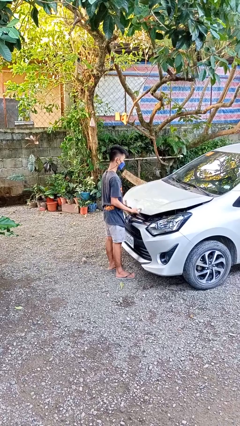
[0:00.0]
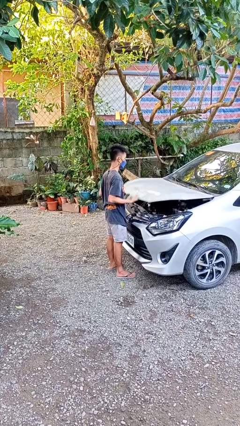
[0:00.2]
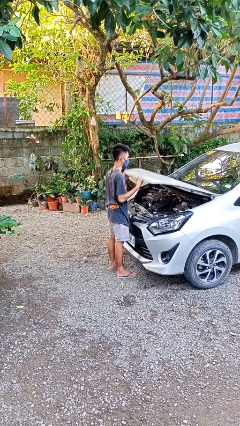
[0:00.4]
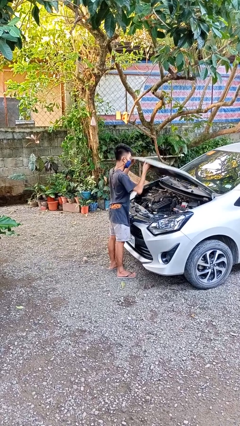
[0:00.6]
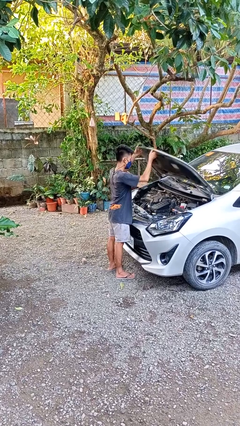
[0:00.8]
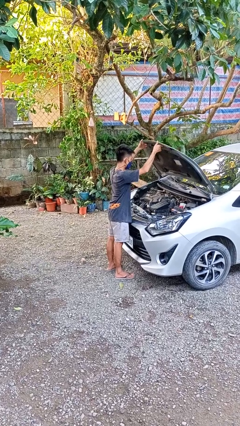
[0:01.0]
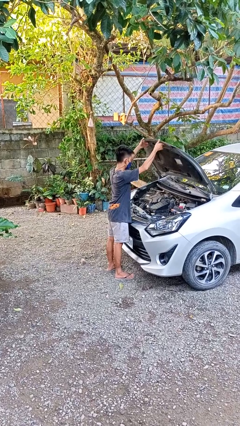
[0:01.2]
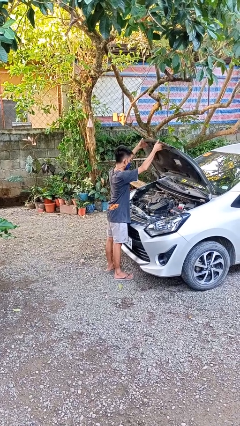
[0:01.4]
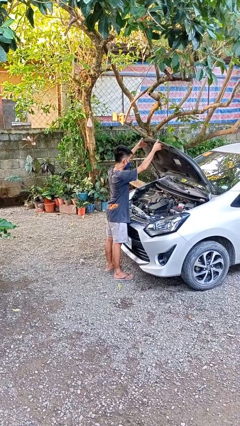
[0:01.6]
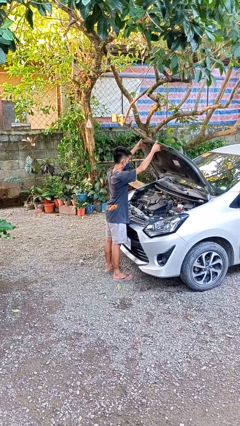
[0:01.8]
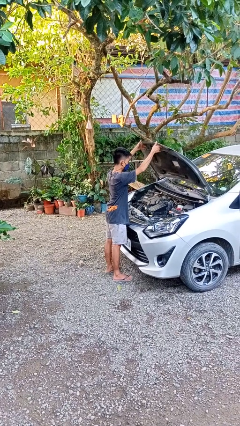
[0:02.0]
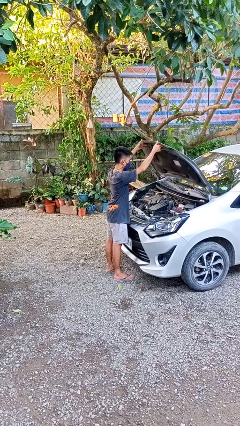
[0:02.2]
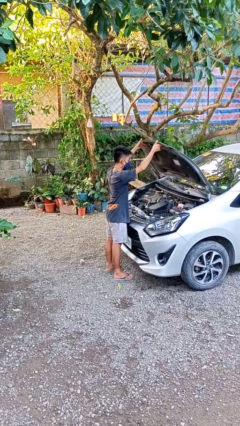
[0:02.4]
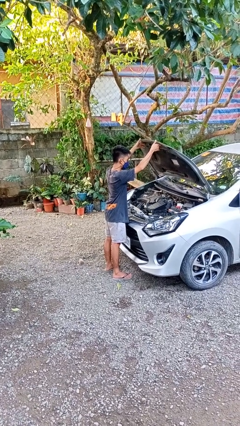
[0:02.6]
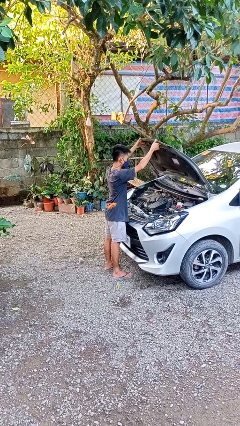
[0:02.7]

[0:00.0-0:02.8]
person opens car hood

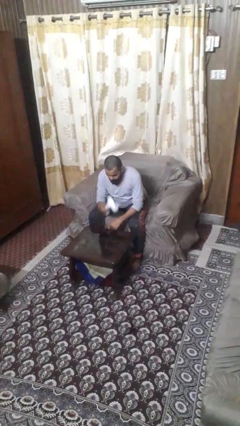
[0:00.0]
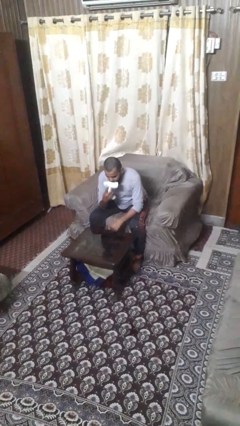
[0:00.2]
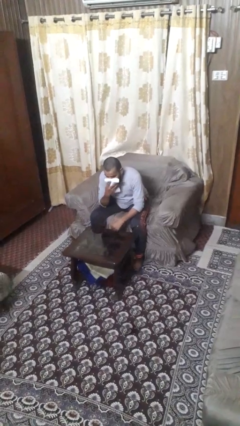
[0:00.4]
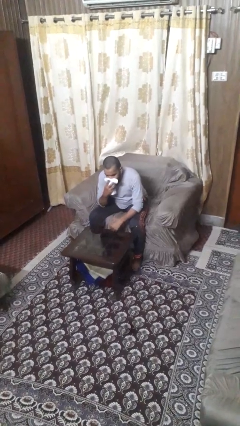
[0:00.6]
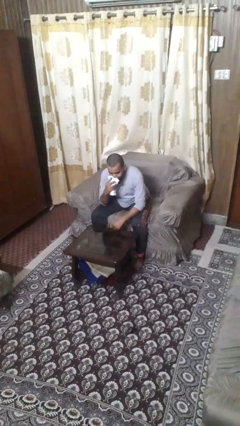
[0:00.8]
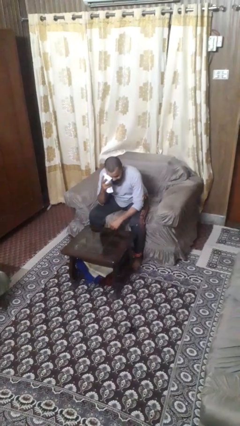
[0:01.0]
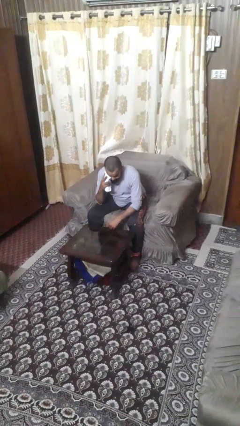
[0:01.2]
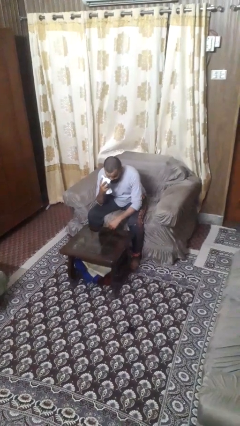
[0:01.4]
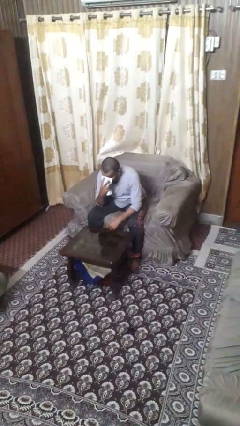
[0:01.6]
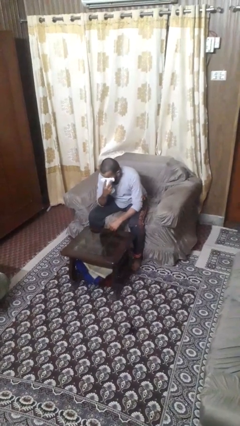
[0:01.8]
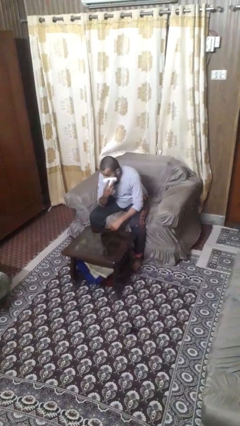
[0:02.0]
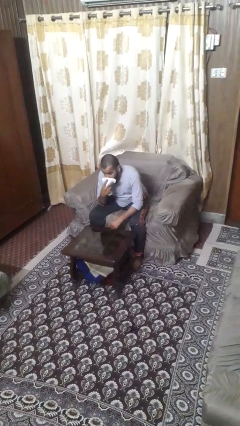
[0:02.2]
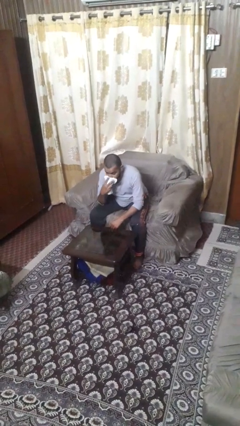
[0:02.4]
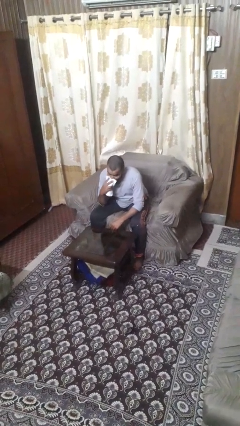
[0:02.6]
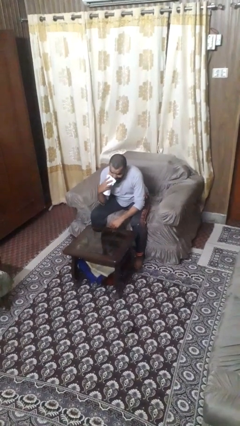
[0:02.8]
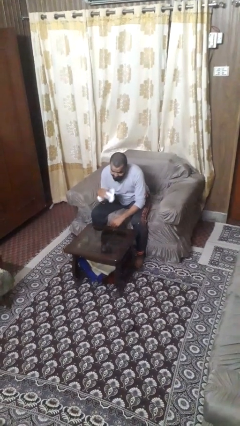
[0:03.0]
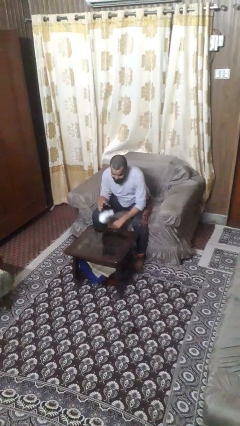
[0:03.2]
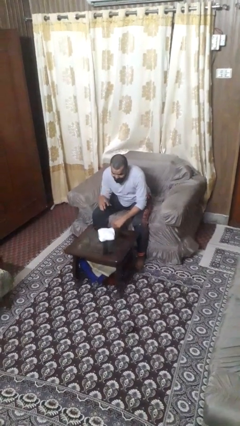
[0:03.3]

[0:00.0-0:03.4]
person wipes mouth with napkin

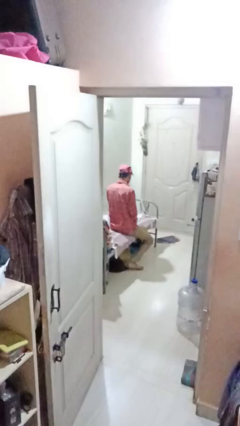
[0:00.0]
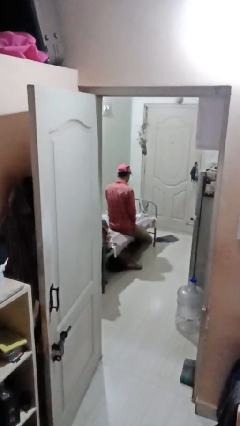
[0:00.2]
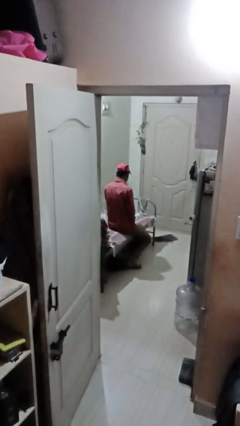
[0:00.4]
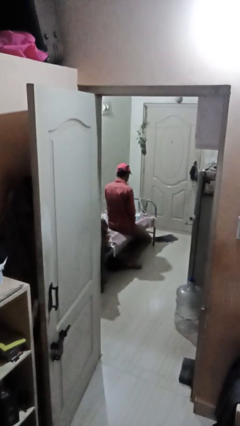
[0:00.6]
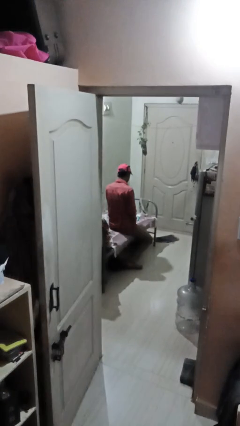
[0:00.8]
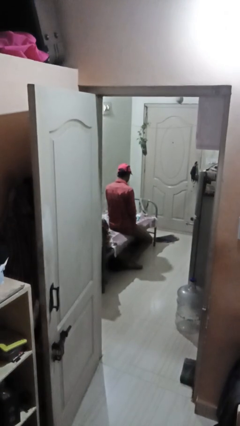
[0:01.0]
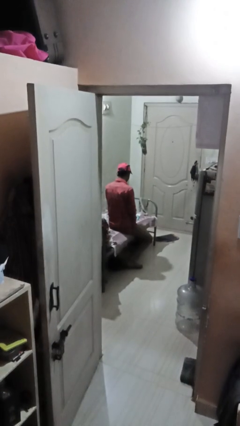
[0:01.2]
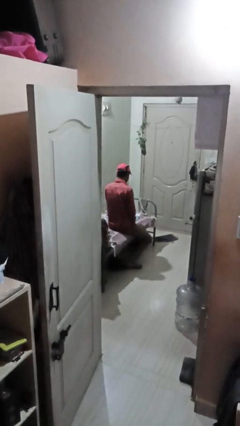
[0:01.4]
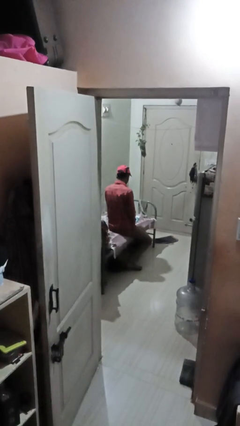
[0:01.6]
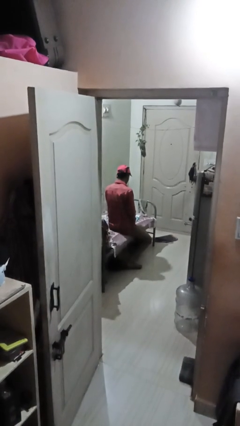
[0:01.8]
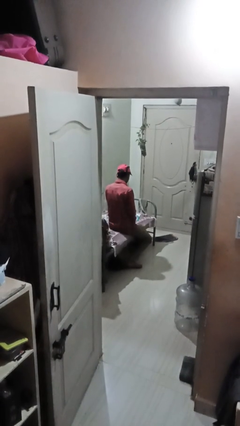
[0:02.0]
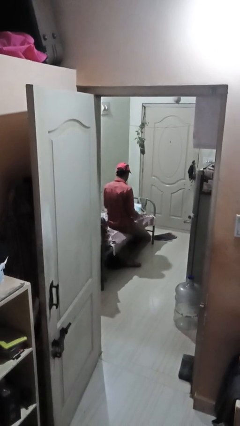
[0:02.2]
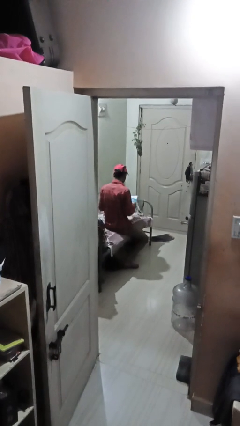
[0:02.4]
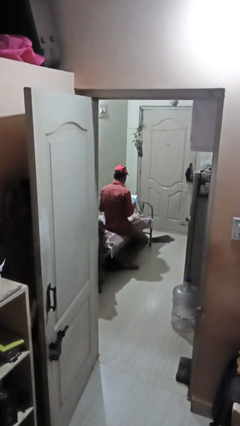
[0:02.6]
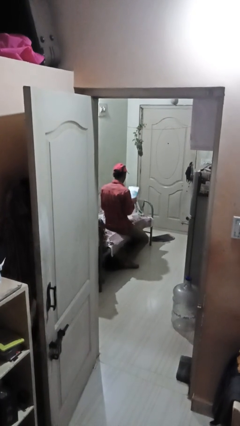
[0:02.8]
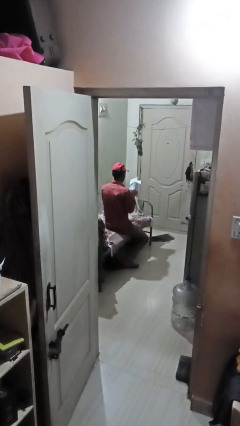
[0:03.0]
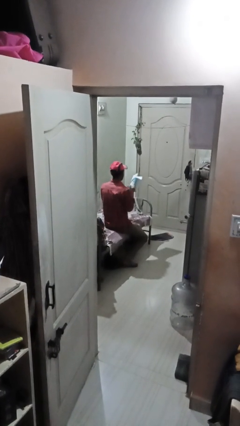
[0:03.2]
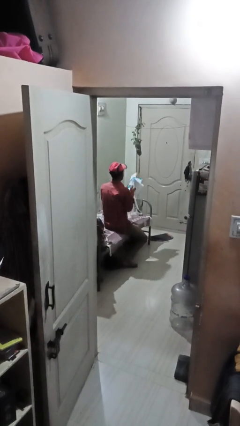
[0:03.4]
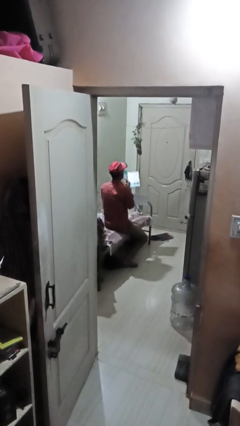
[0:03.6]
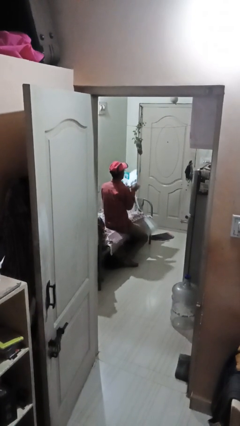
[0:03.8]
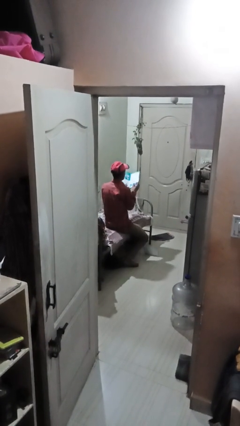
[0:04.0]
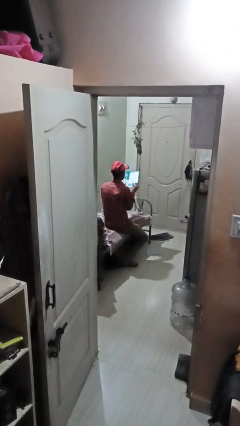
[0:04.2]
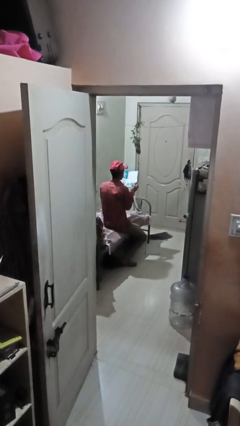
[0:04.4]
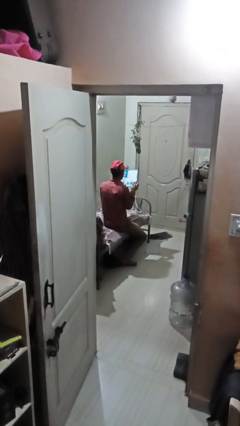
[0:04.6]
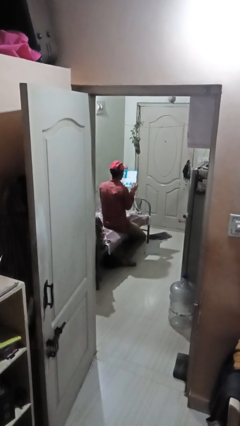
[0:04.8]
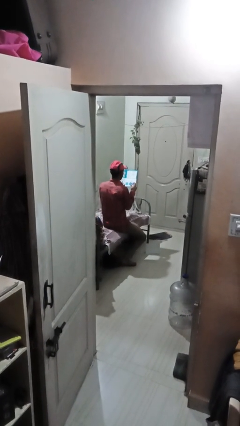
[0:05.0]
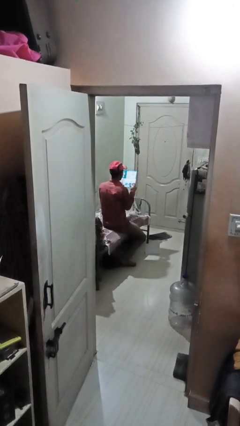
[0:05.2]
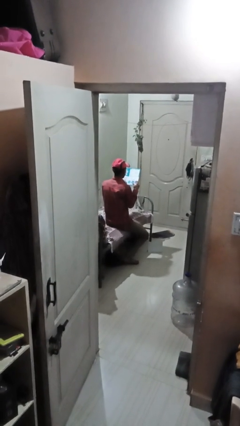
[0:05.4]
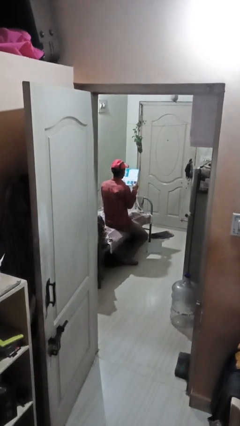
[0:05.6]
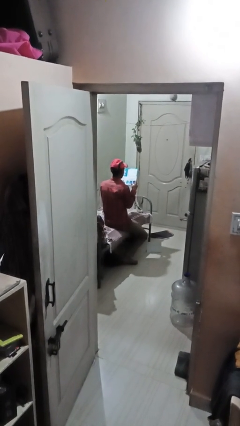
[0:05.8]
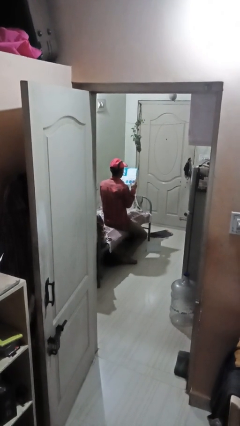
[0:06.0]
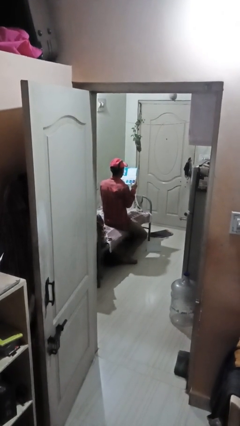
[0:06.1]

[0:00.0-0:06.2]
person reads magazine

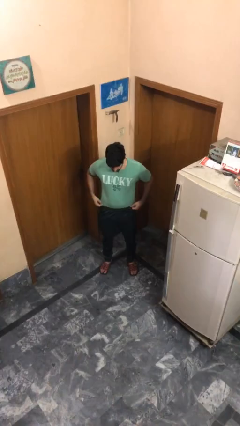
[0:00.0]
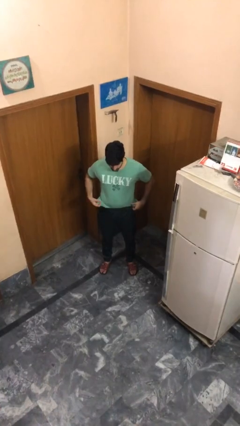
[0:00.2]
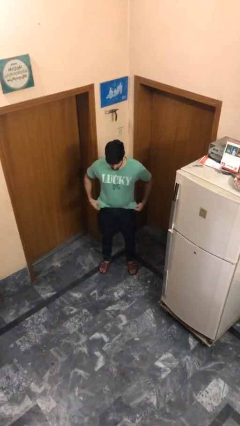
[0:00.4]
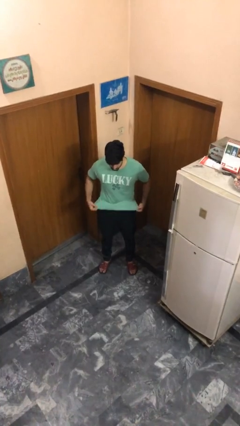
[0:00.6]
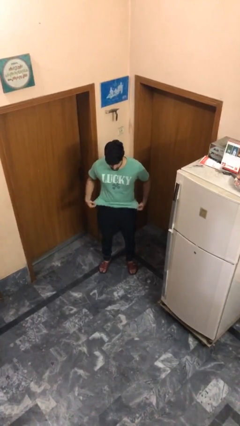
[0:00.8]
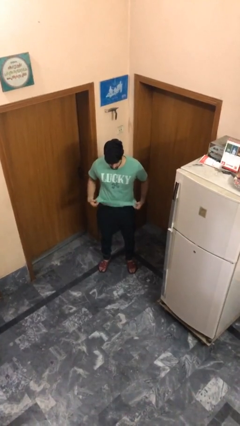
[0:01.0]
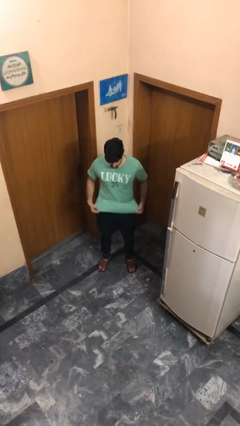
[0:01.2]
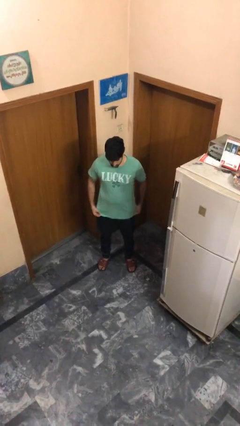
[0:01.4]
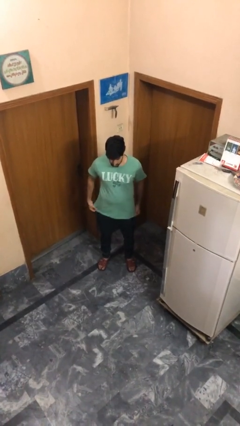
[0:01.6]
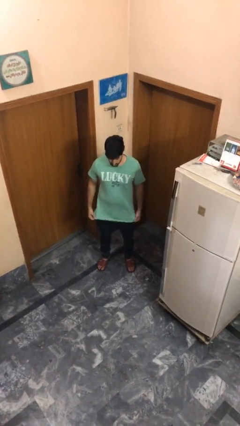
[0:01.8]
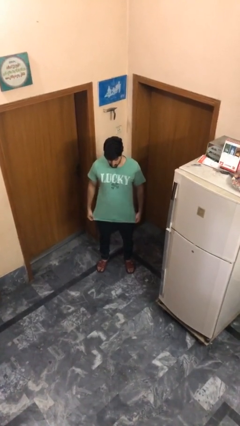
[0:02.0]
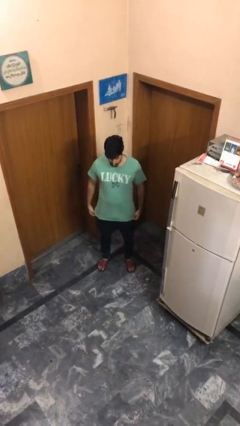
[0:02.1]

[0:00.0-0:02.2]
person untucks shirt

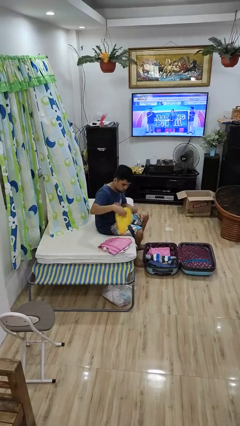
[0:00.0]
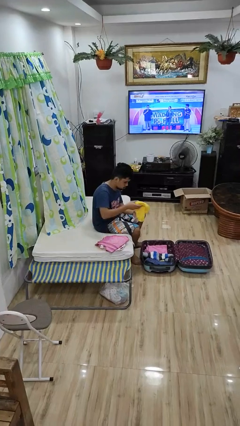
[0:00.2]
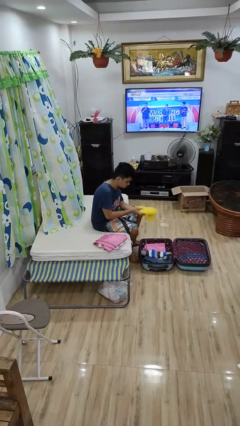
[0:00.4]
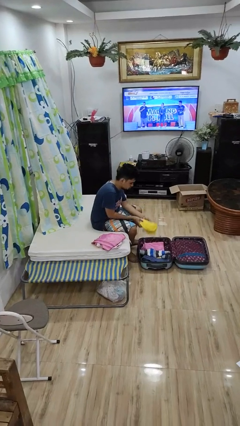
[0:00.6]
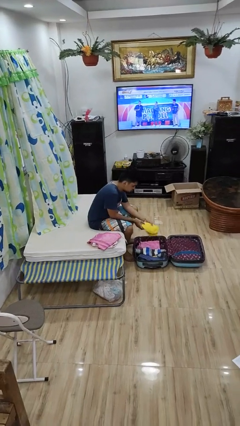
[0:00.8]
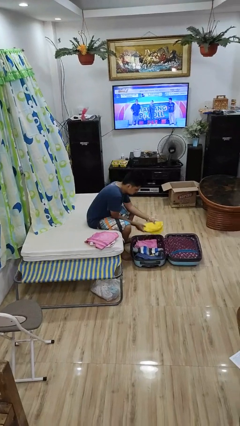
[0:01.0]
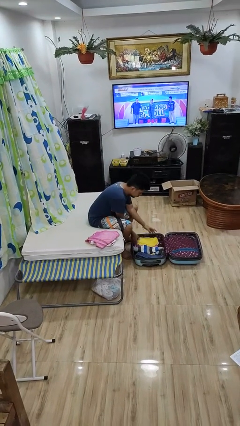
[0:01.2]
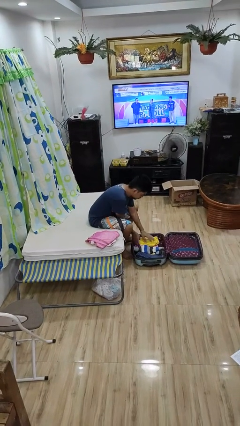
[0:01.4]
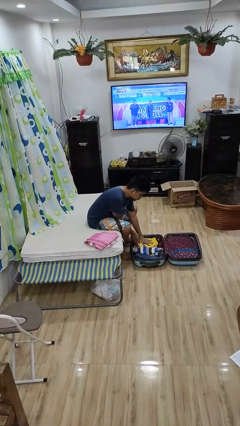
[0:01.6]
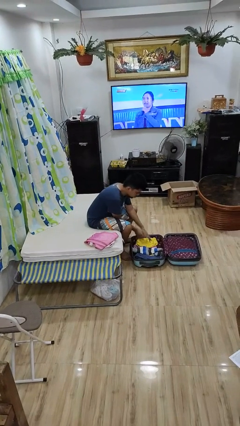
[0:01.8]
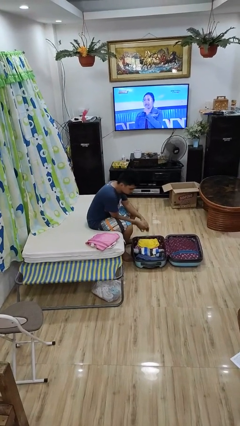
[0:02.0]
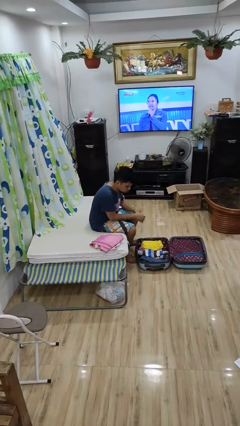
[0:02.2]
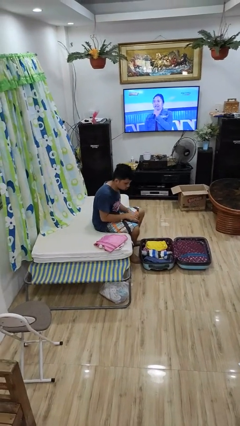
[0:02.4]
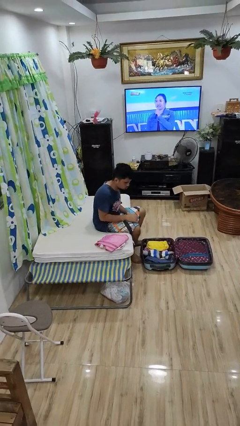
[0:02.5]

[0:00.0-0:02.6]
person loads clothes into suitcase

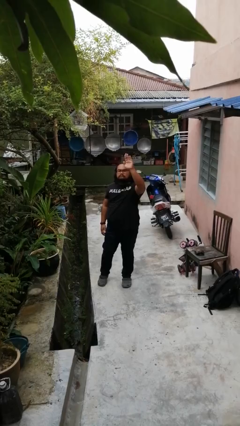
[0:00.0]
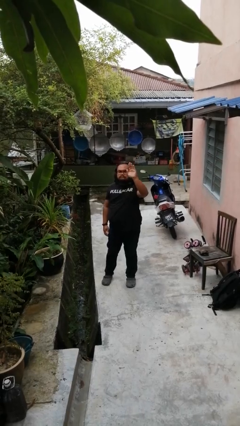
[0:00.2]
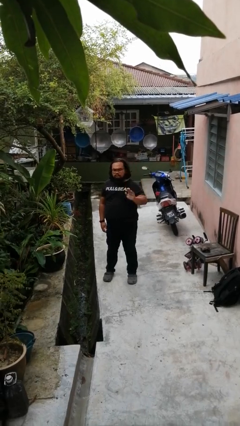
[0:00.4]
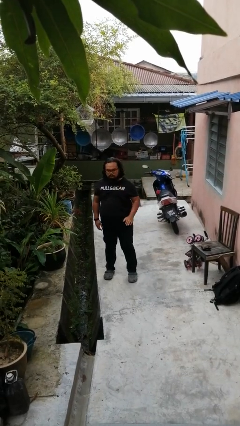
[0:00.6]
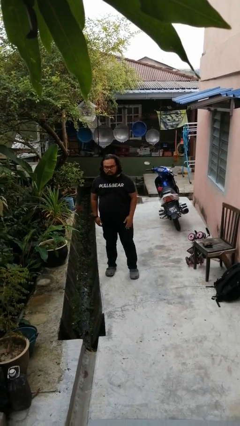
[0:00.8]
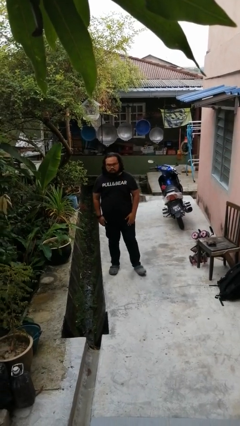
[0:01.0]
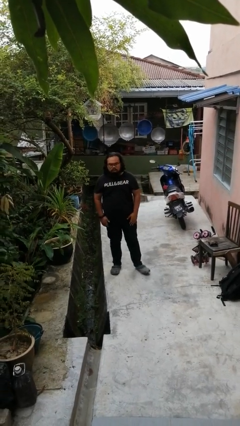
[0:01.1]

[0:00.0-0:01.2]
person gestures lower hand
